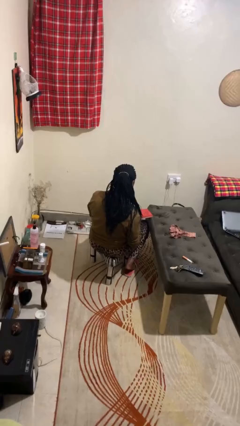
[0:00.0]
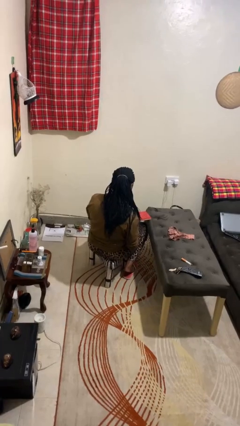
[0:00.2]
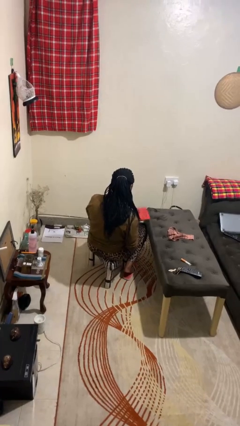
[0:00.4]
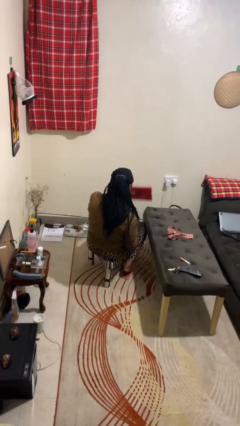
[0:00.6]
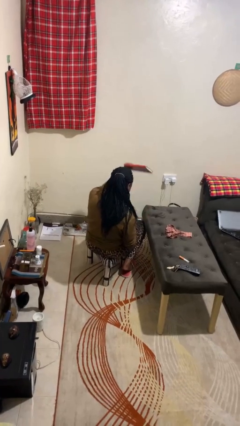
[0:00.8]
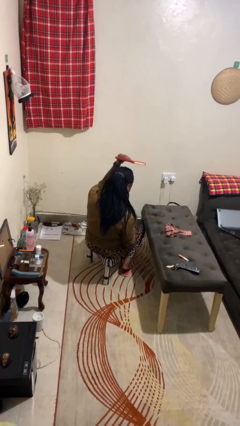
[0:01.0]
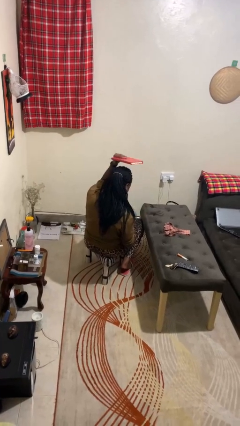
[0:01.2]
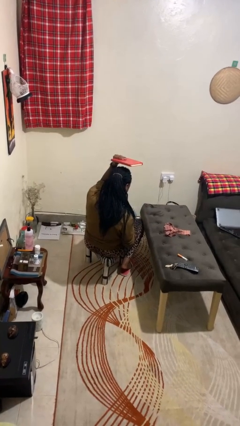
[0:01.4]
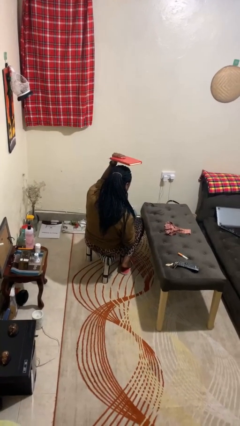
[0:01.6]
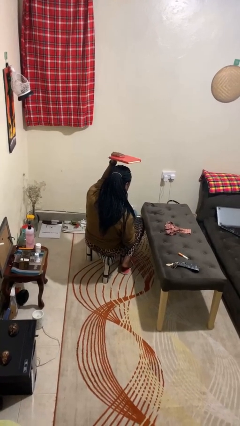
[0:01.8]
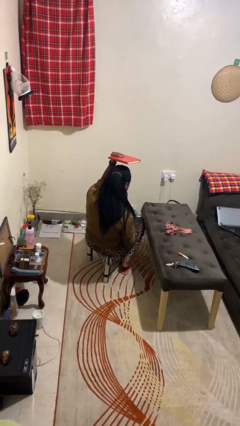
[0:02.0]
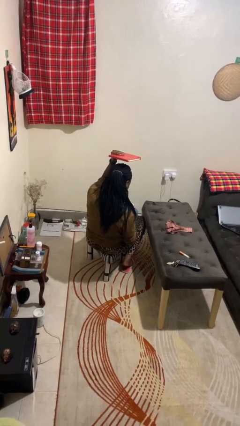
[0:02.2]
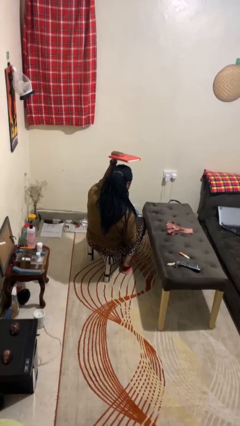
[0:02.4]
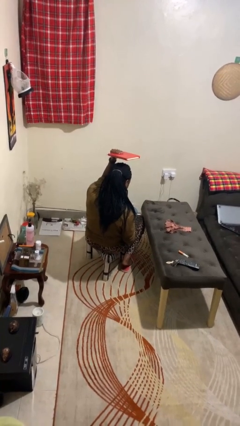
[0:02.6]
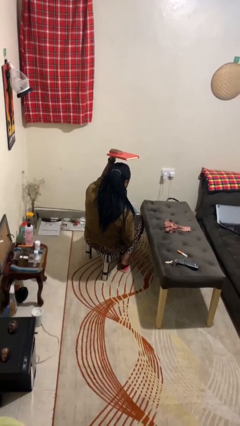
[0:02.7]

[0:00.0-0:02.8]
person holds object above head

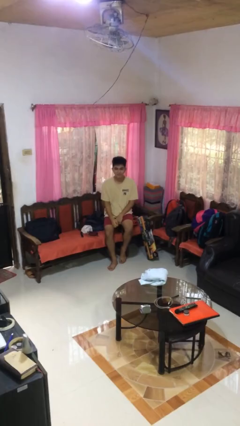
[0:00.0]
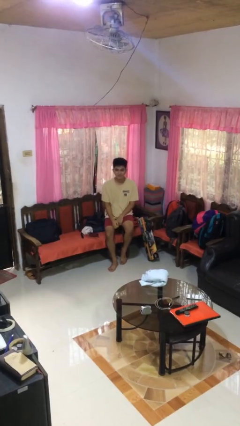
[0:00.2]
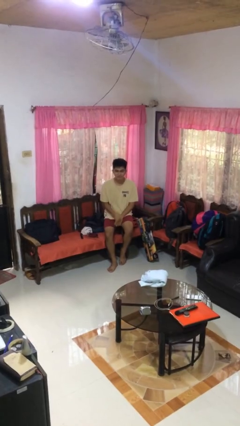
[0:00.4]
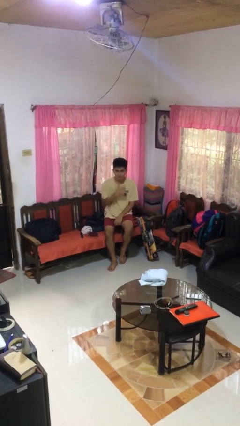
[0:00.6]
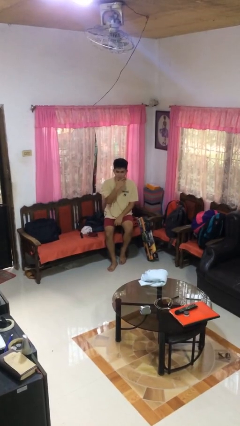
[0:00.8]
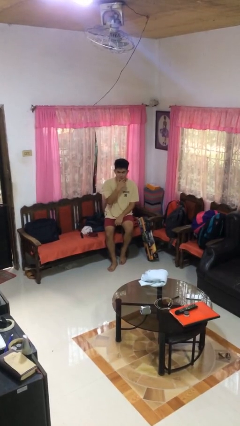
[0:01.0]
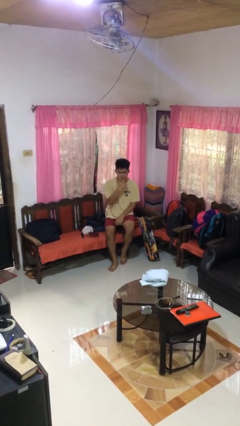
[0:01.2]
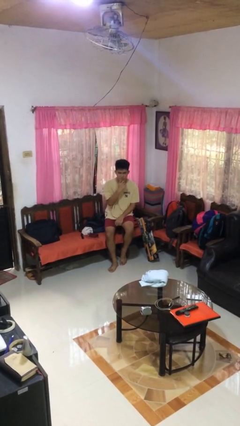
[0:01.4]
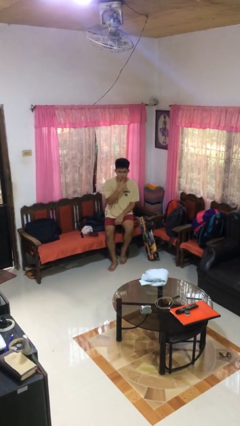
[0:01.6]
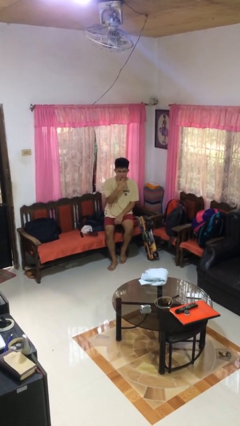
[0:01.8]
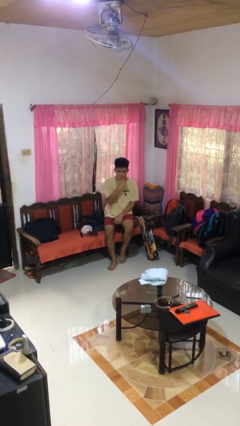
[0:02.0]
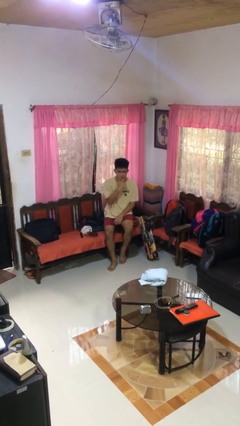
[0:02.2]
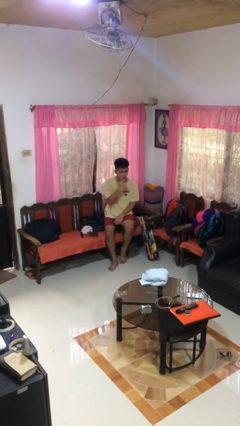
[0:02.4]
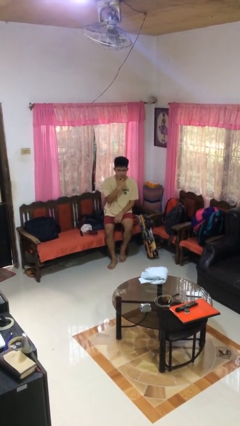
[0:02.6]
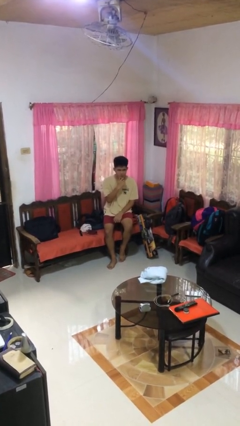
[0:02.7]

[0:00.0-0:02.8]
person strokes chin

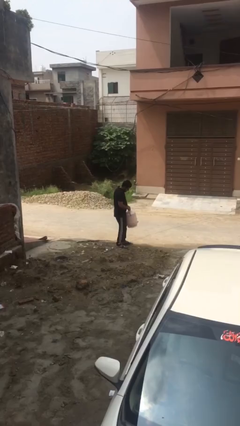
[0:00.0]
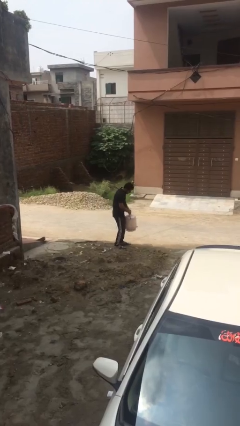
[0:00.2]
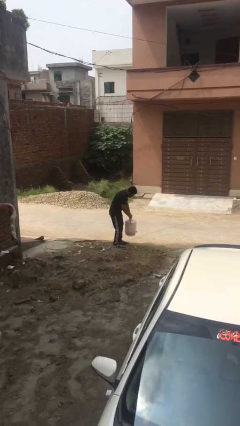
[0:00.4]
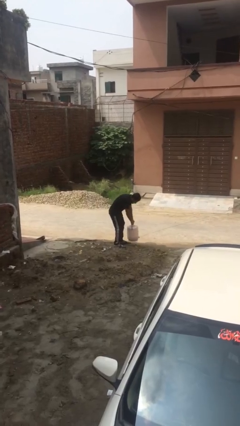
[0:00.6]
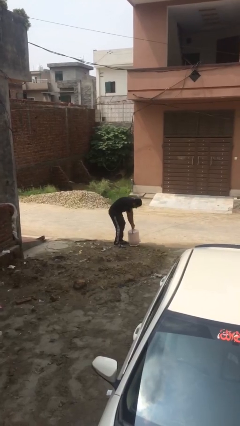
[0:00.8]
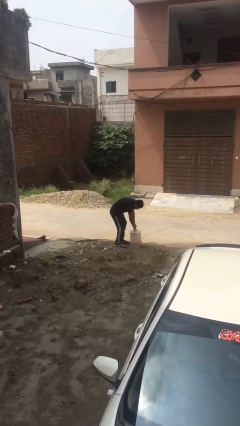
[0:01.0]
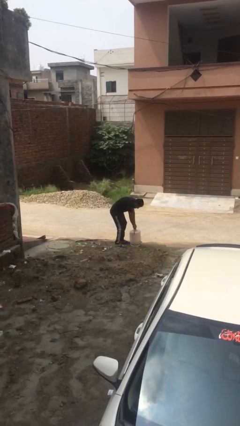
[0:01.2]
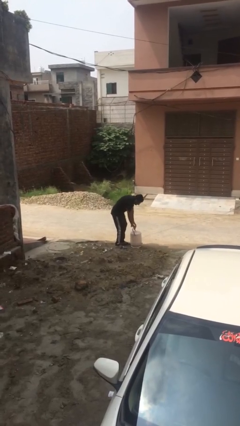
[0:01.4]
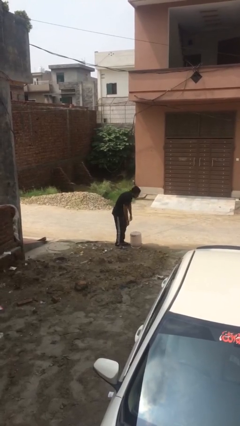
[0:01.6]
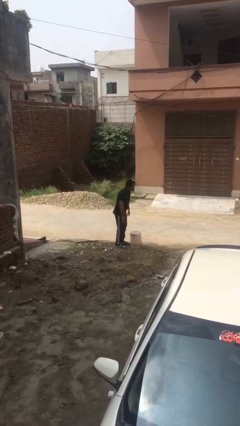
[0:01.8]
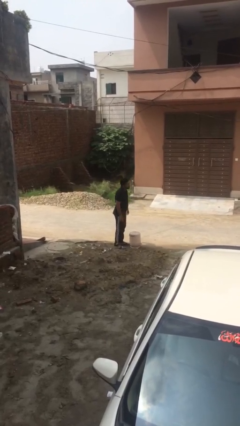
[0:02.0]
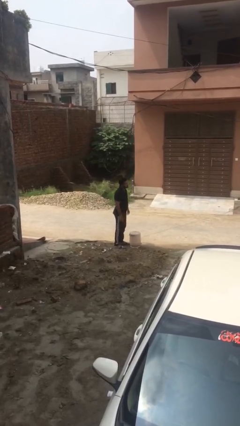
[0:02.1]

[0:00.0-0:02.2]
person puts down object on floor

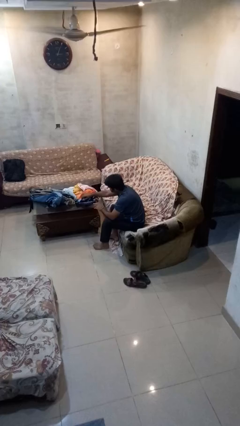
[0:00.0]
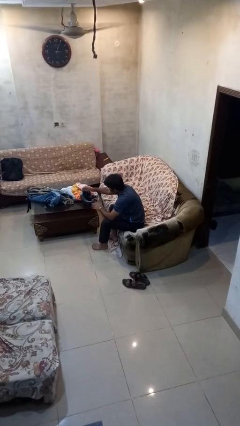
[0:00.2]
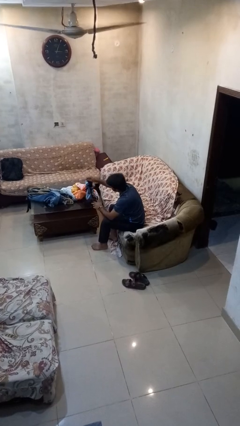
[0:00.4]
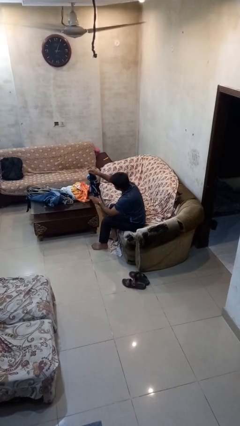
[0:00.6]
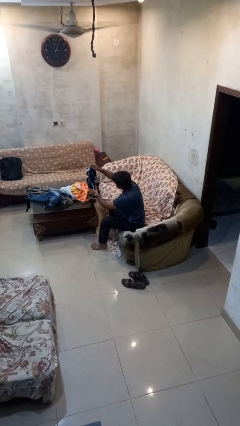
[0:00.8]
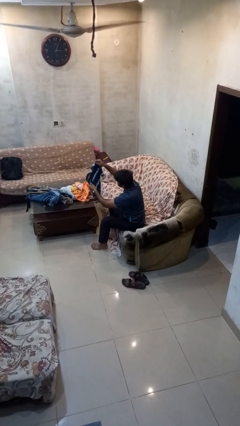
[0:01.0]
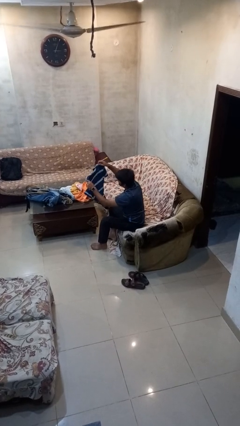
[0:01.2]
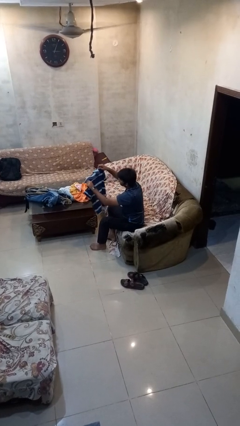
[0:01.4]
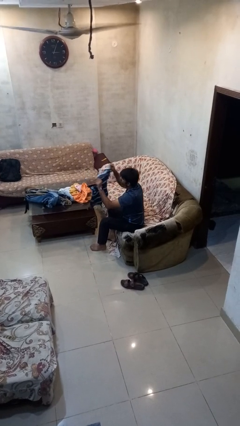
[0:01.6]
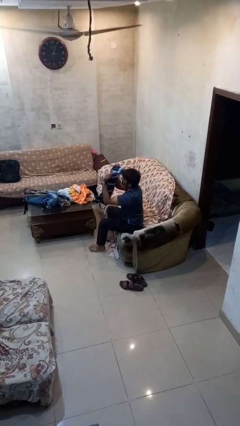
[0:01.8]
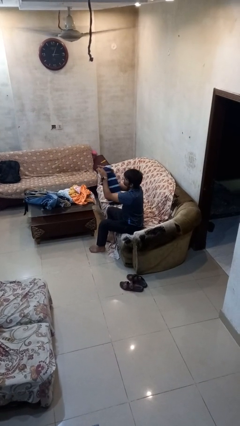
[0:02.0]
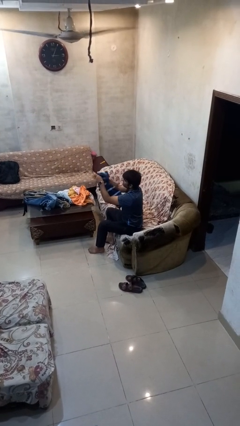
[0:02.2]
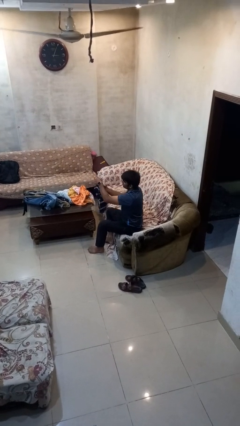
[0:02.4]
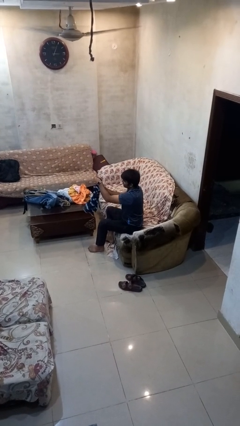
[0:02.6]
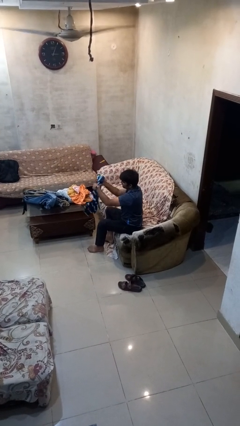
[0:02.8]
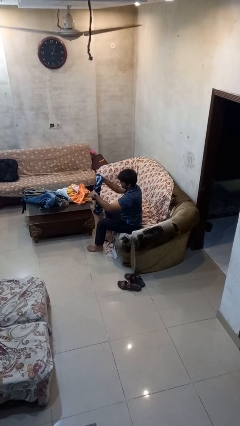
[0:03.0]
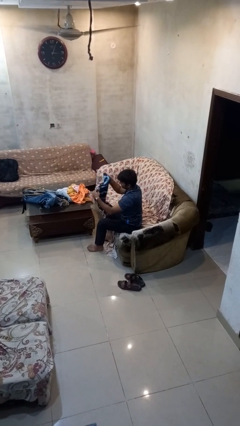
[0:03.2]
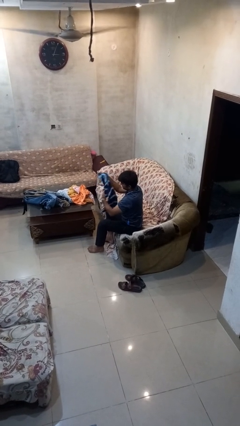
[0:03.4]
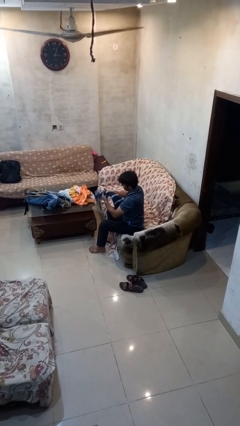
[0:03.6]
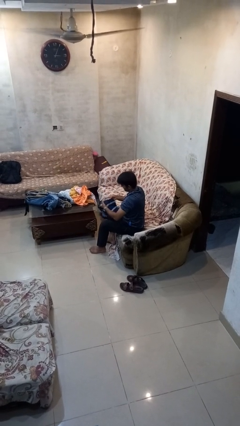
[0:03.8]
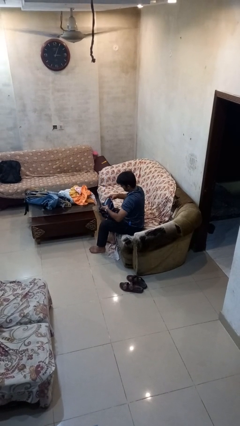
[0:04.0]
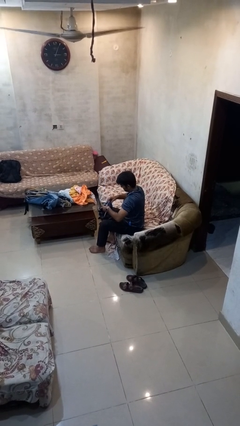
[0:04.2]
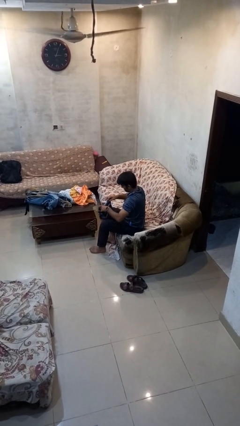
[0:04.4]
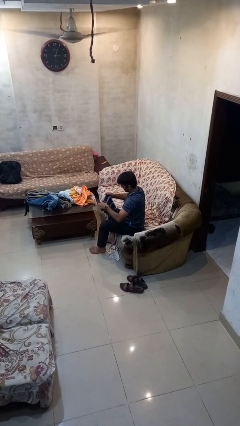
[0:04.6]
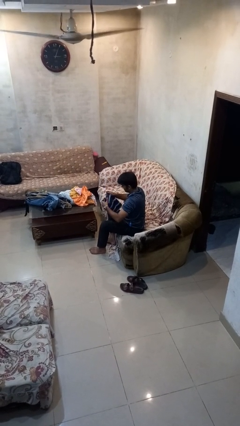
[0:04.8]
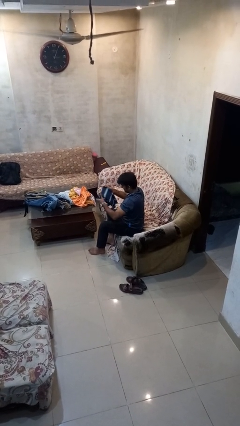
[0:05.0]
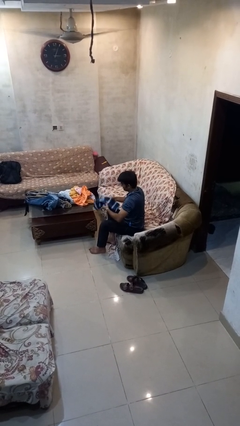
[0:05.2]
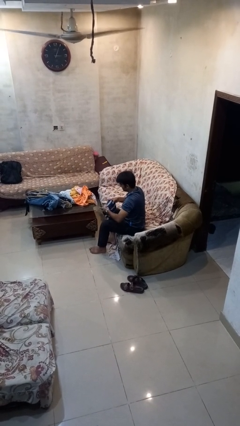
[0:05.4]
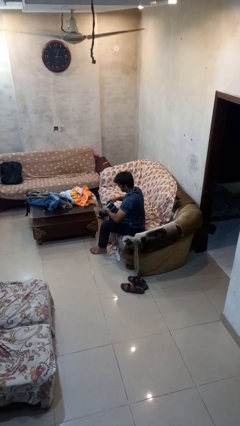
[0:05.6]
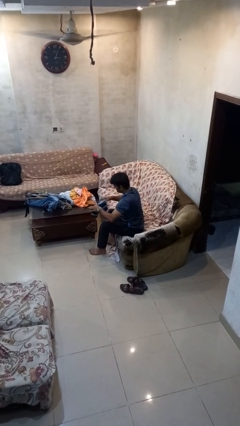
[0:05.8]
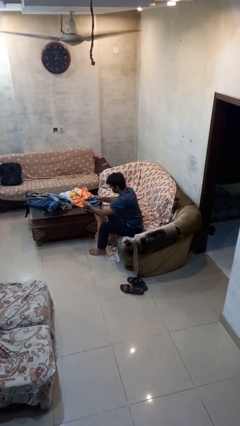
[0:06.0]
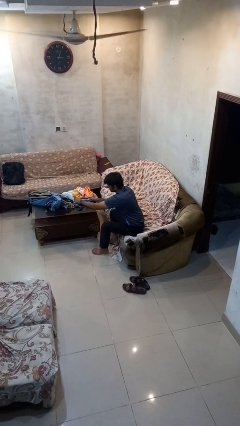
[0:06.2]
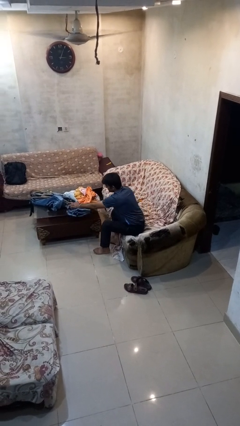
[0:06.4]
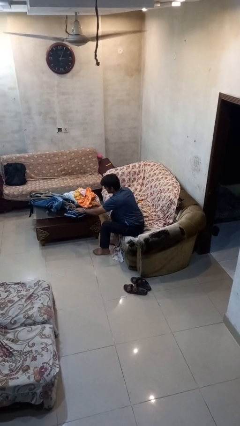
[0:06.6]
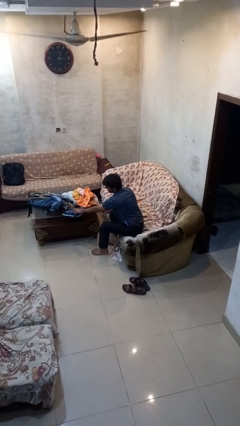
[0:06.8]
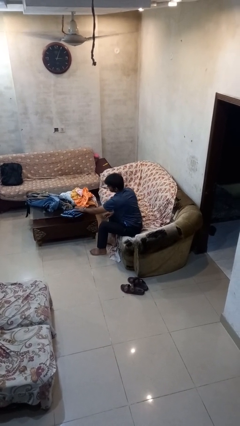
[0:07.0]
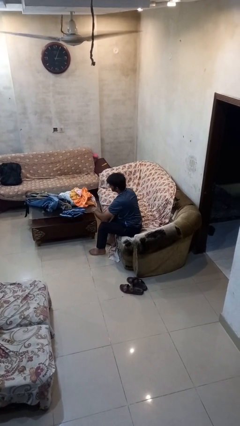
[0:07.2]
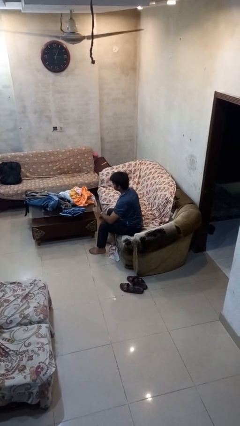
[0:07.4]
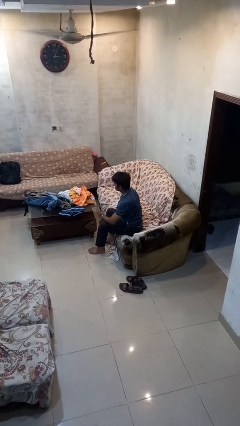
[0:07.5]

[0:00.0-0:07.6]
person folds shirt

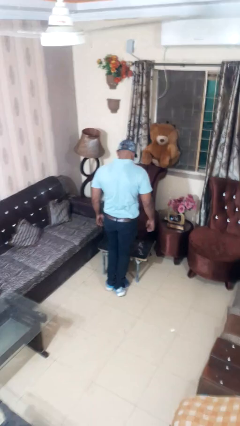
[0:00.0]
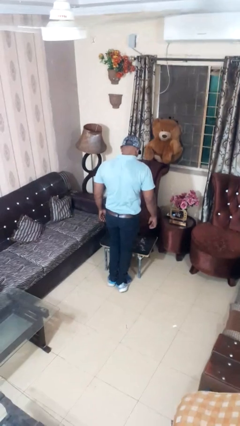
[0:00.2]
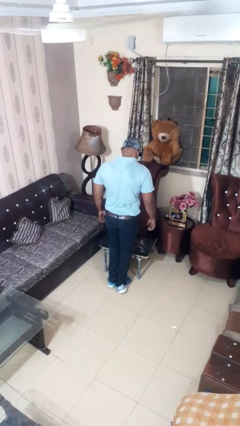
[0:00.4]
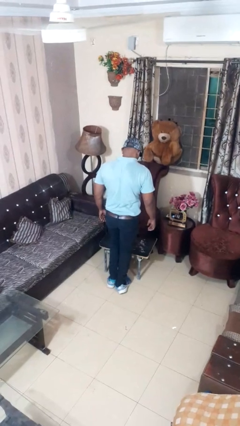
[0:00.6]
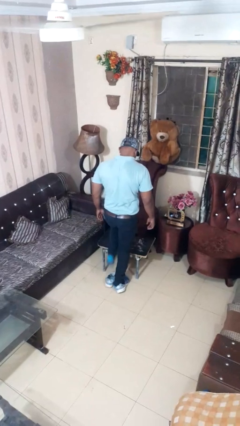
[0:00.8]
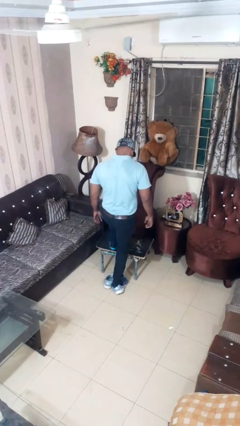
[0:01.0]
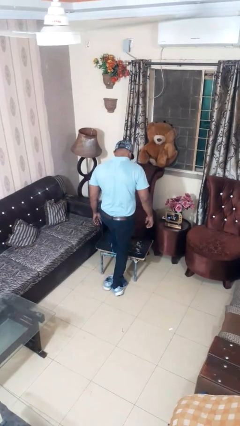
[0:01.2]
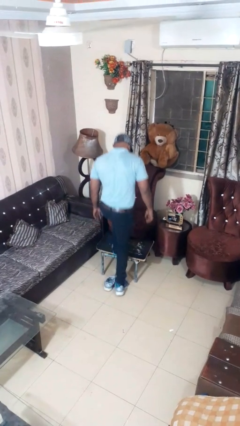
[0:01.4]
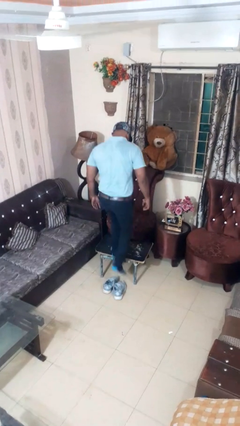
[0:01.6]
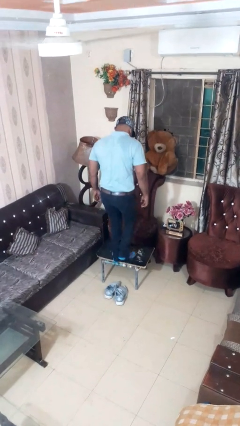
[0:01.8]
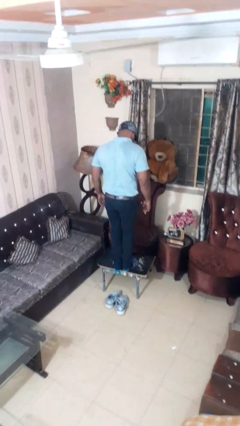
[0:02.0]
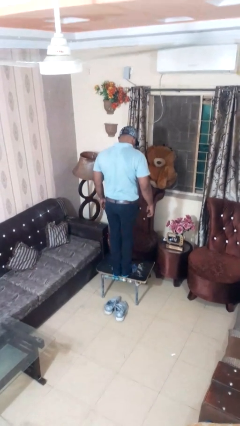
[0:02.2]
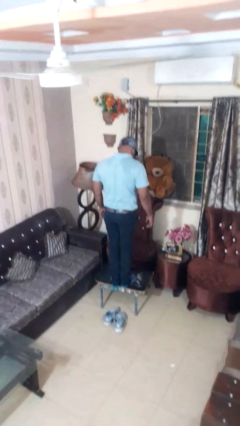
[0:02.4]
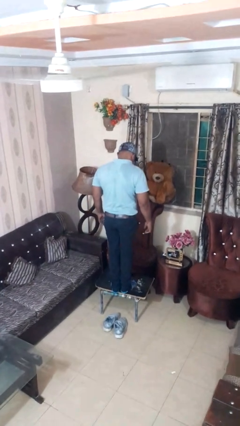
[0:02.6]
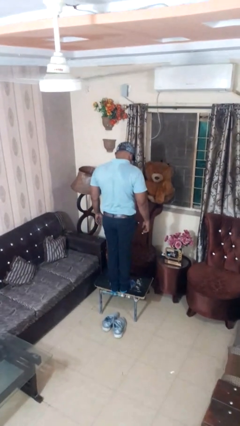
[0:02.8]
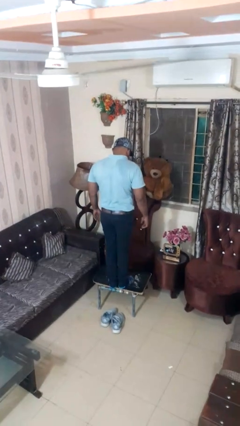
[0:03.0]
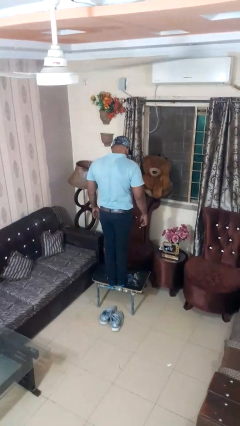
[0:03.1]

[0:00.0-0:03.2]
person climbs on table
